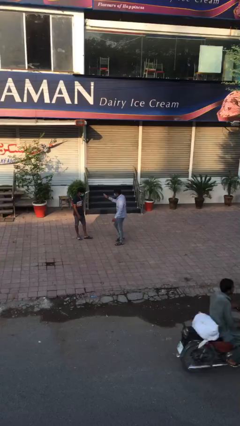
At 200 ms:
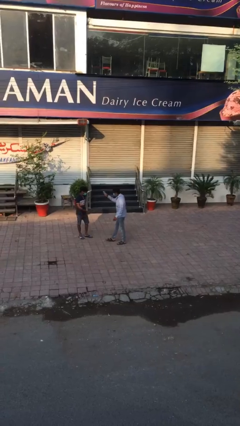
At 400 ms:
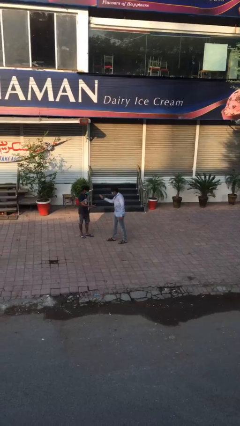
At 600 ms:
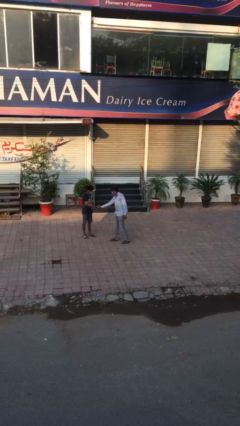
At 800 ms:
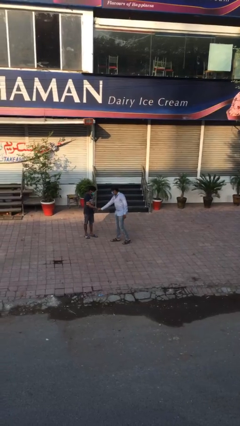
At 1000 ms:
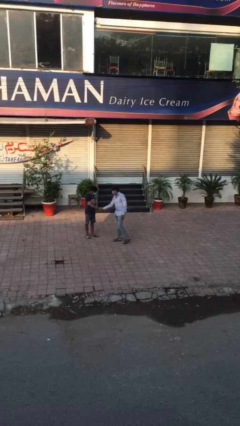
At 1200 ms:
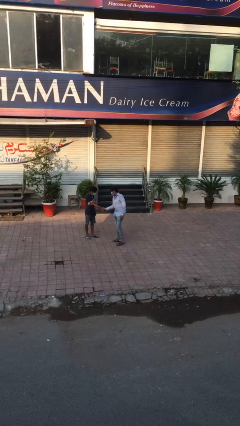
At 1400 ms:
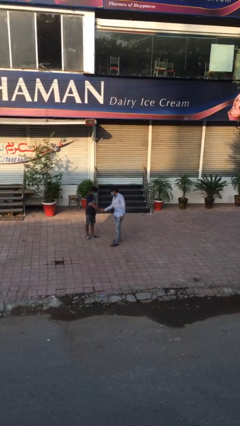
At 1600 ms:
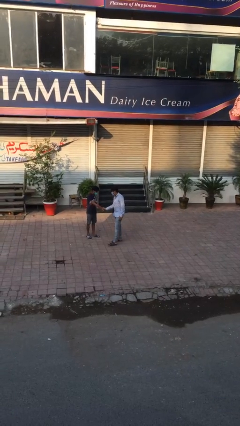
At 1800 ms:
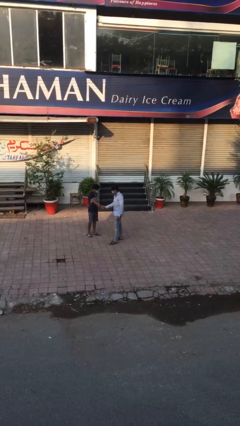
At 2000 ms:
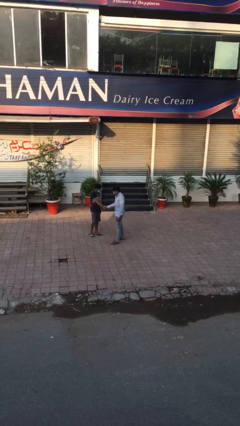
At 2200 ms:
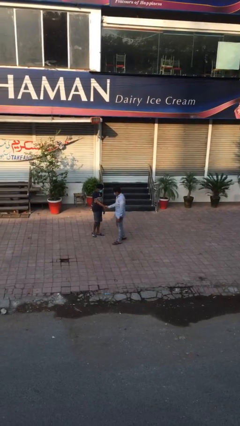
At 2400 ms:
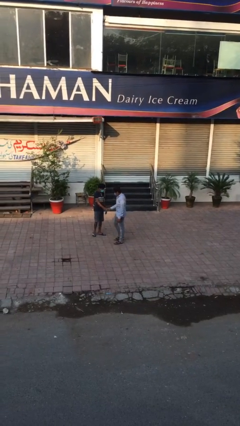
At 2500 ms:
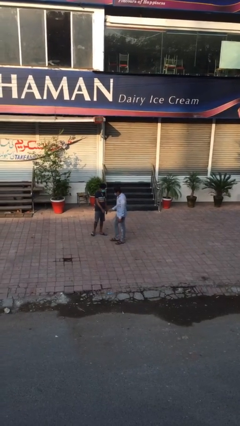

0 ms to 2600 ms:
person shakes hand

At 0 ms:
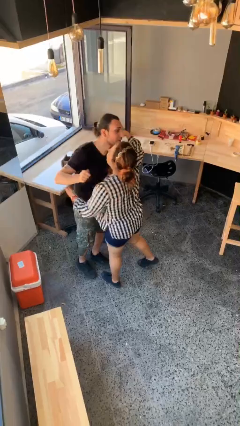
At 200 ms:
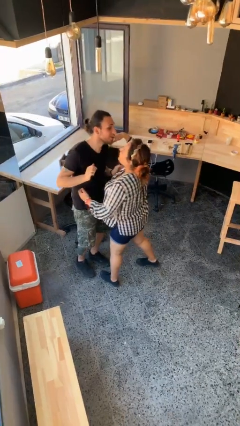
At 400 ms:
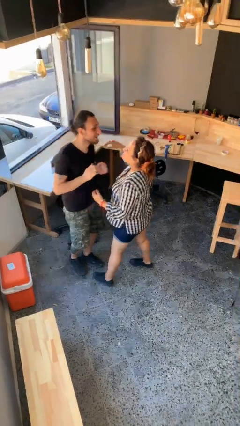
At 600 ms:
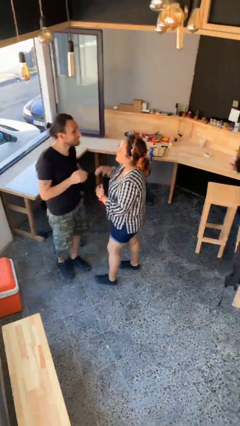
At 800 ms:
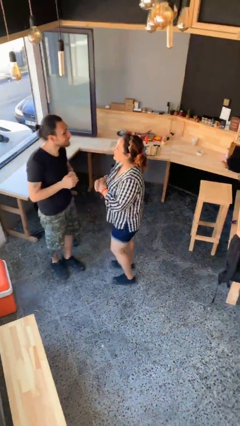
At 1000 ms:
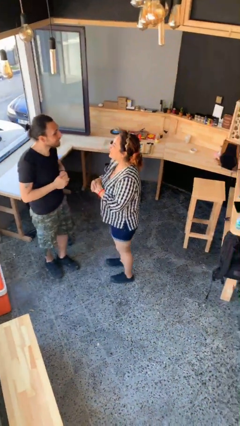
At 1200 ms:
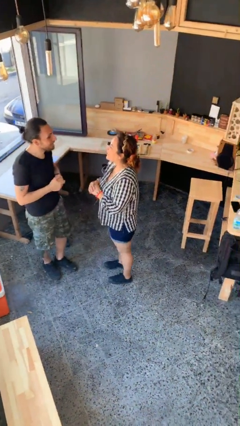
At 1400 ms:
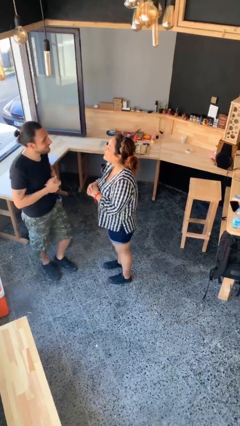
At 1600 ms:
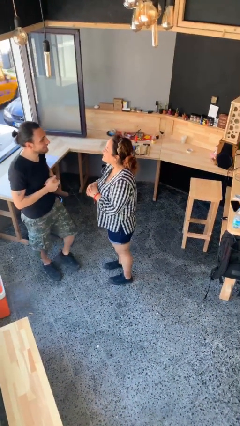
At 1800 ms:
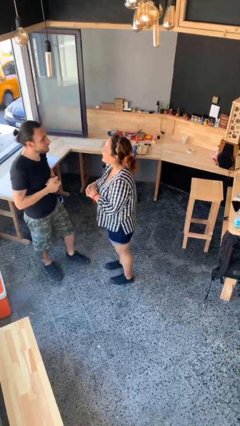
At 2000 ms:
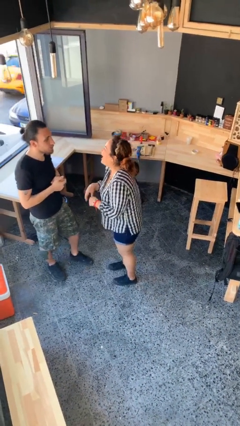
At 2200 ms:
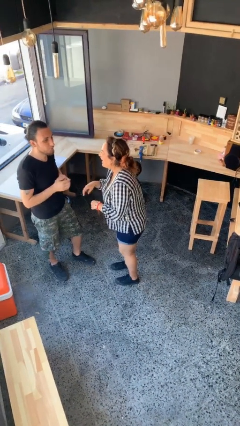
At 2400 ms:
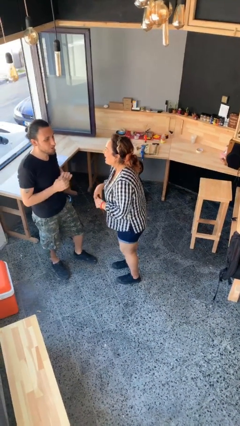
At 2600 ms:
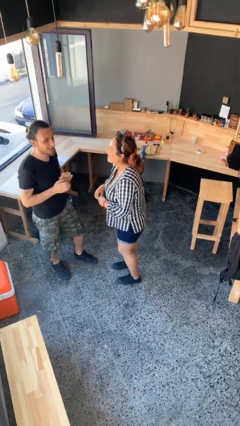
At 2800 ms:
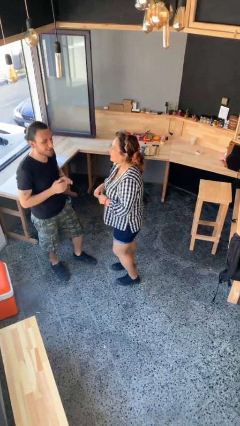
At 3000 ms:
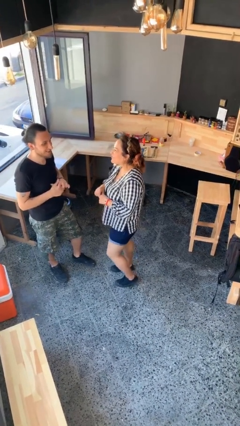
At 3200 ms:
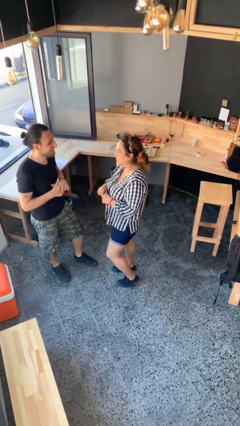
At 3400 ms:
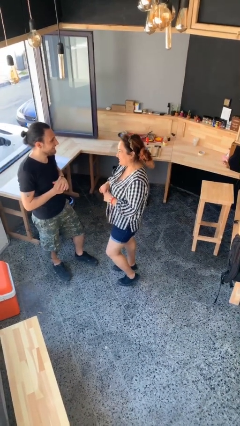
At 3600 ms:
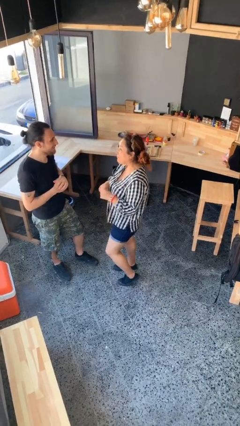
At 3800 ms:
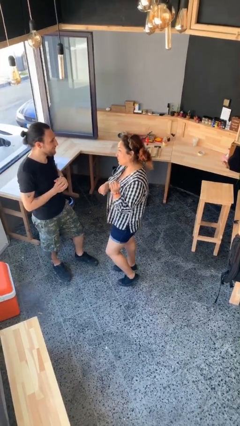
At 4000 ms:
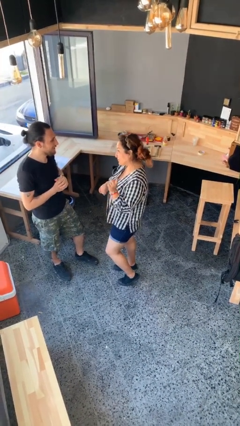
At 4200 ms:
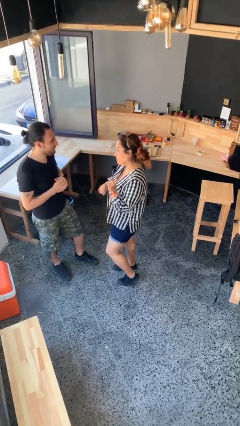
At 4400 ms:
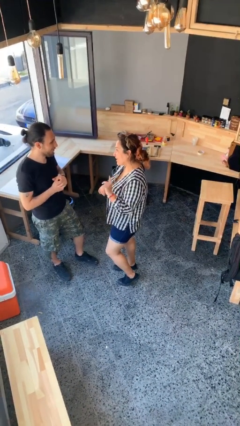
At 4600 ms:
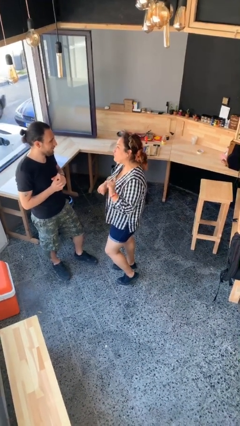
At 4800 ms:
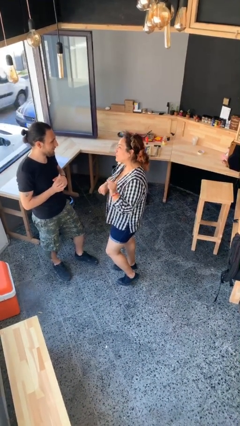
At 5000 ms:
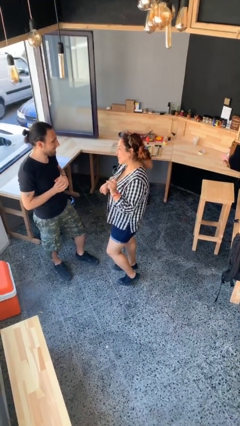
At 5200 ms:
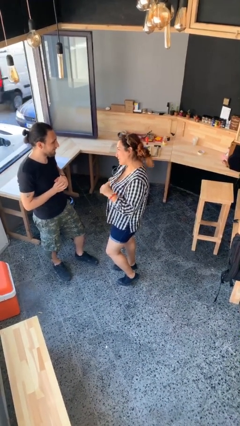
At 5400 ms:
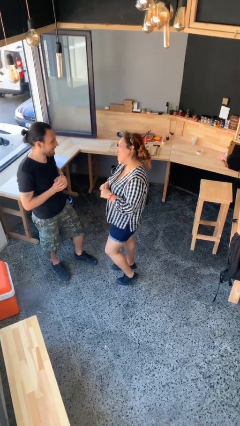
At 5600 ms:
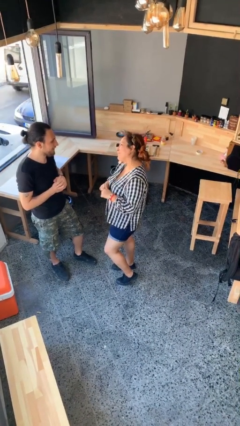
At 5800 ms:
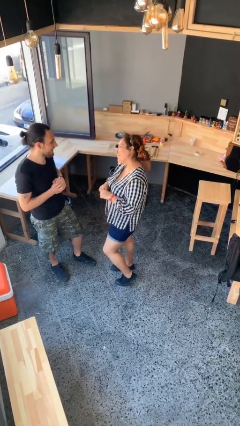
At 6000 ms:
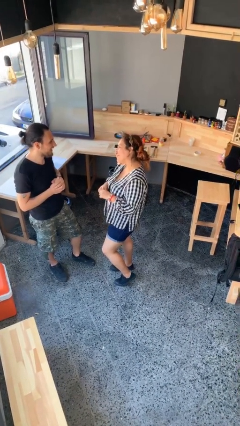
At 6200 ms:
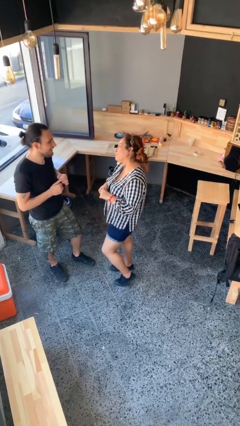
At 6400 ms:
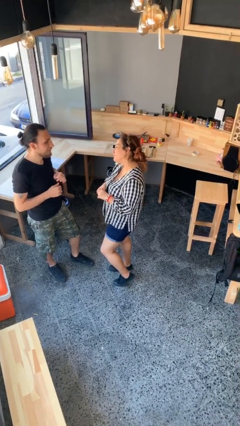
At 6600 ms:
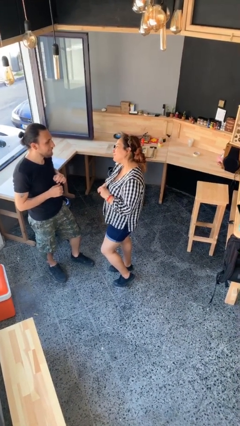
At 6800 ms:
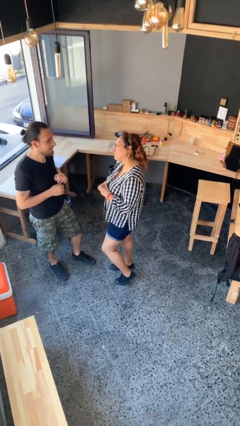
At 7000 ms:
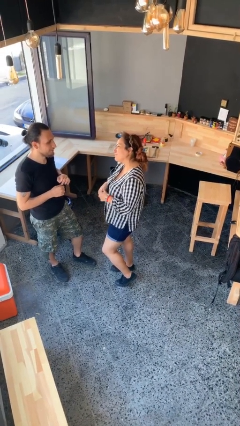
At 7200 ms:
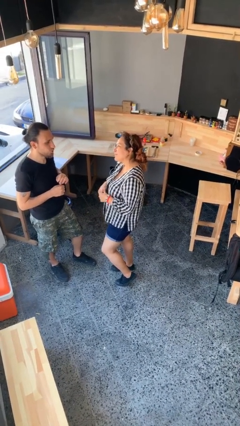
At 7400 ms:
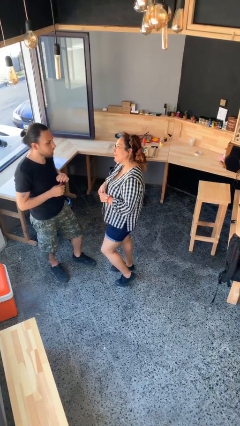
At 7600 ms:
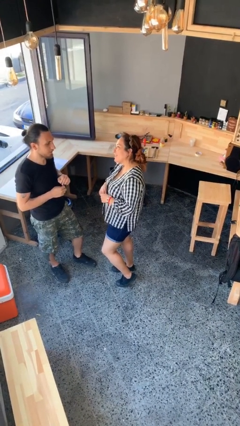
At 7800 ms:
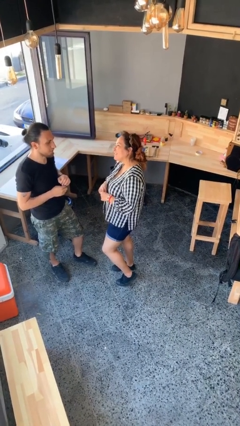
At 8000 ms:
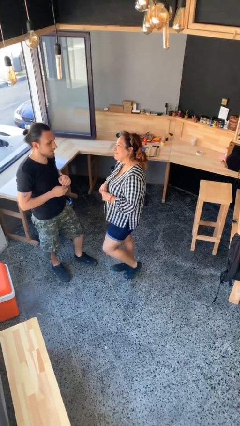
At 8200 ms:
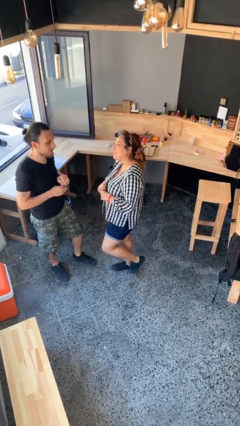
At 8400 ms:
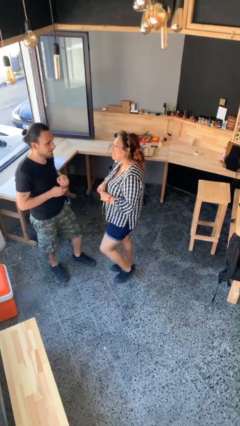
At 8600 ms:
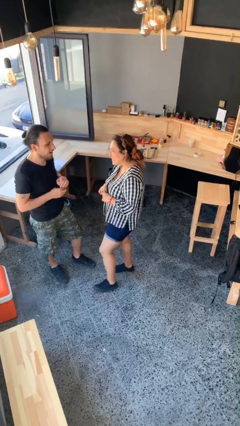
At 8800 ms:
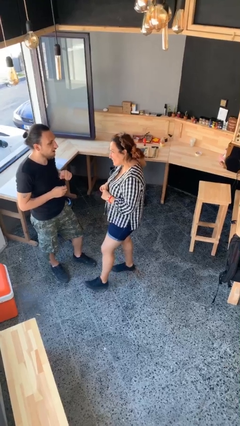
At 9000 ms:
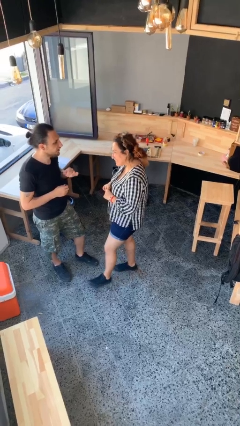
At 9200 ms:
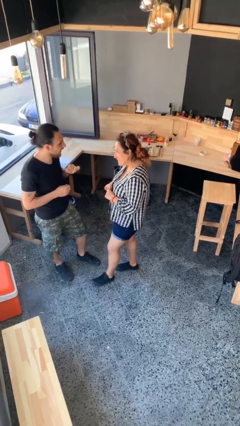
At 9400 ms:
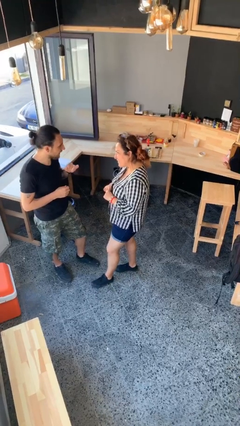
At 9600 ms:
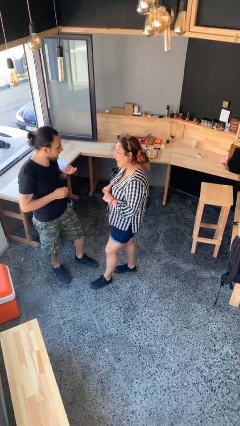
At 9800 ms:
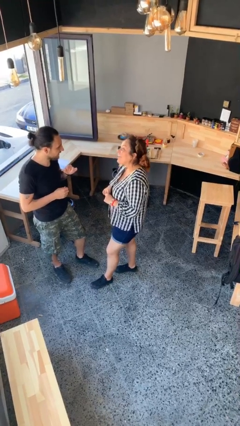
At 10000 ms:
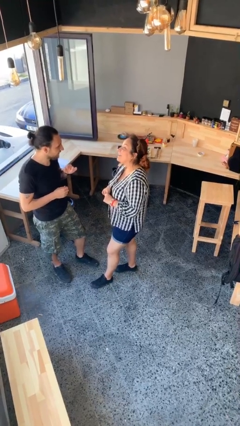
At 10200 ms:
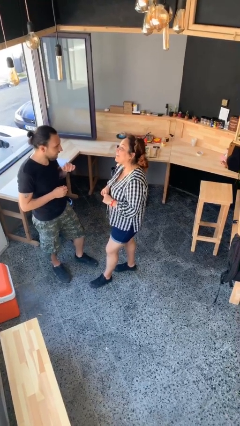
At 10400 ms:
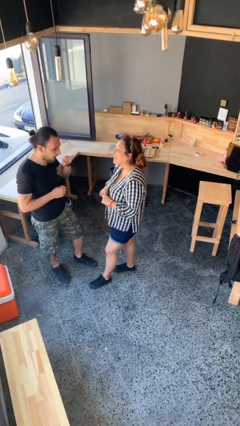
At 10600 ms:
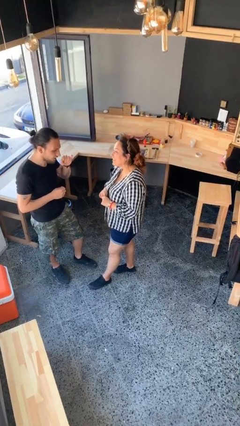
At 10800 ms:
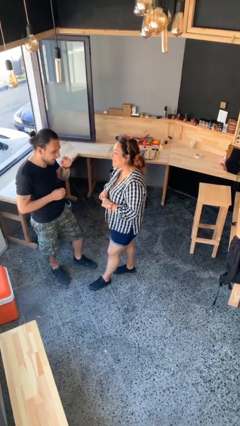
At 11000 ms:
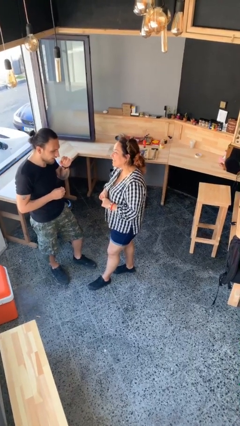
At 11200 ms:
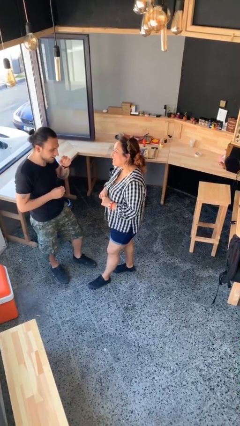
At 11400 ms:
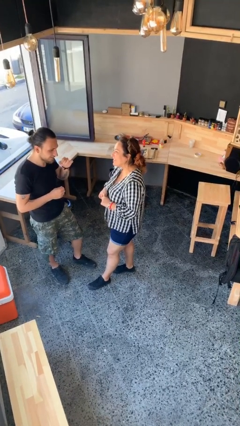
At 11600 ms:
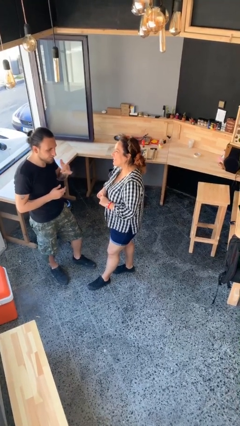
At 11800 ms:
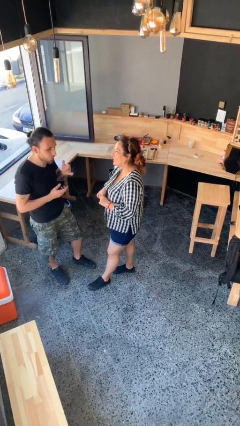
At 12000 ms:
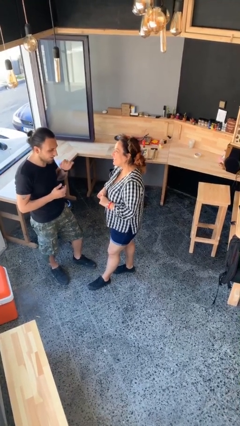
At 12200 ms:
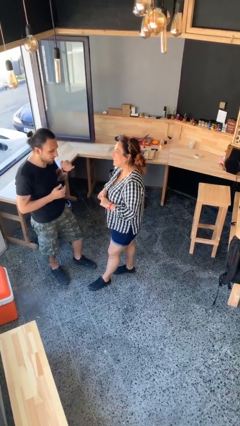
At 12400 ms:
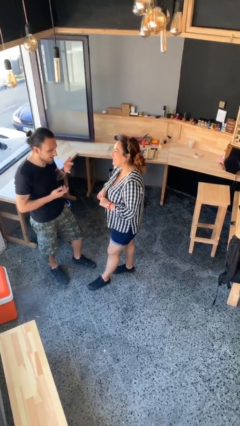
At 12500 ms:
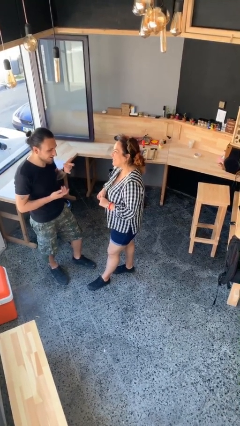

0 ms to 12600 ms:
person talks to person

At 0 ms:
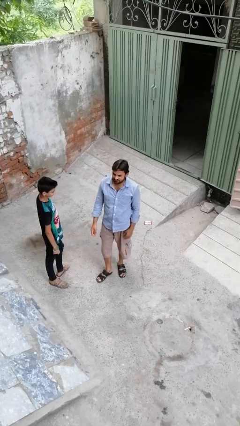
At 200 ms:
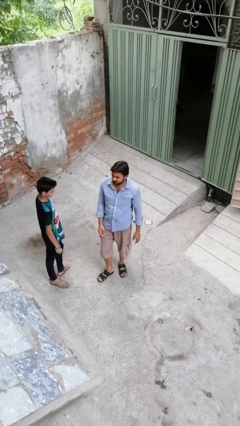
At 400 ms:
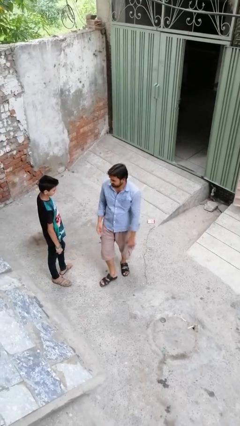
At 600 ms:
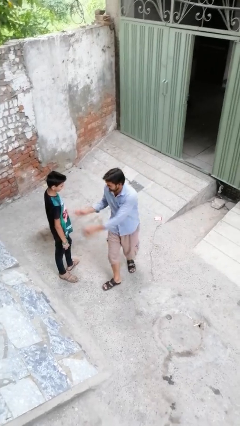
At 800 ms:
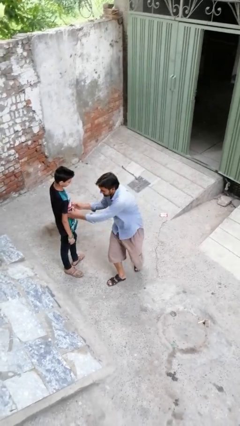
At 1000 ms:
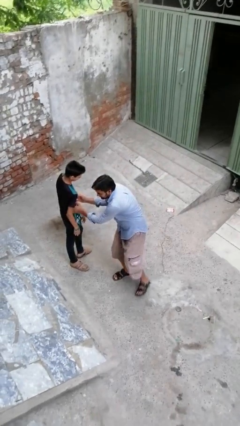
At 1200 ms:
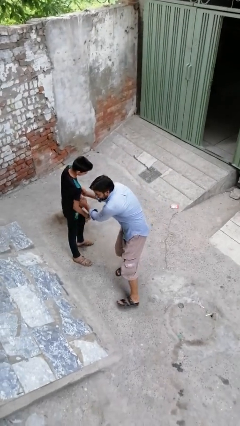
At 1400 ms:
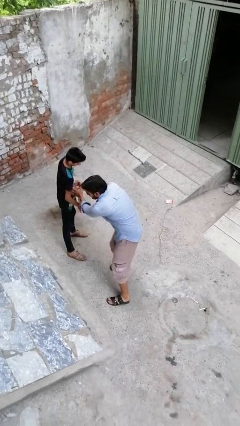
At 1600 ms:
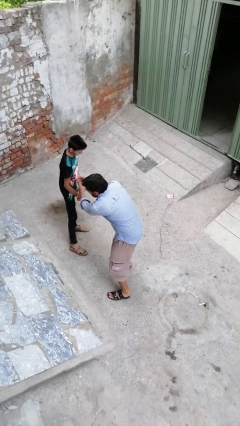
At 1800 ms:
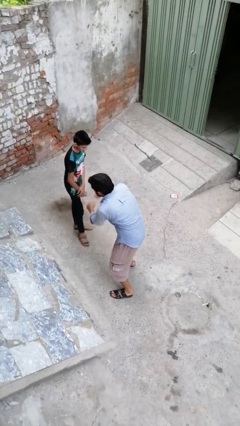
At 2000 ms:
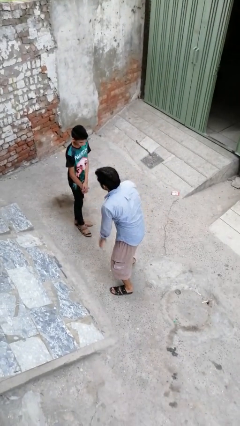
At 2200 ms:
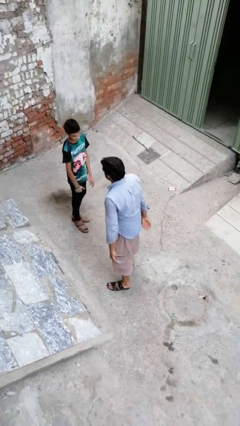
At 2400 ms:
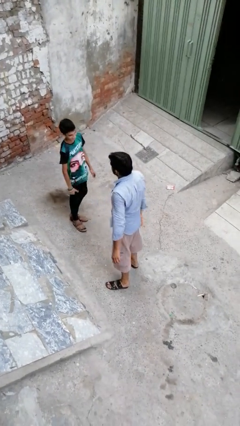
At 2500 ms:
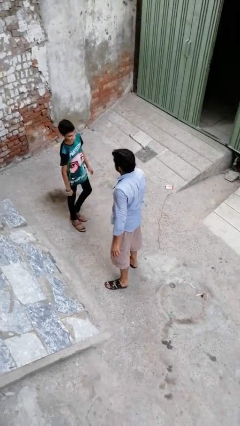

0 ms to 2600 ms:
person tickles person

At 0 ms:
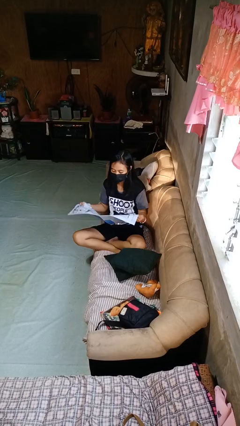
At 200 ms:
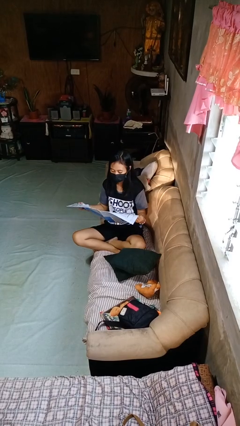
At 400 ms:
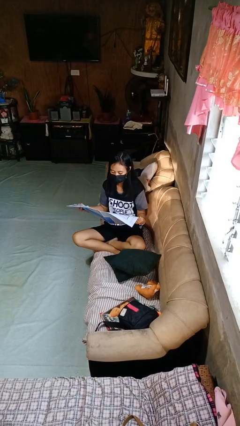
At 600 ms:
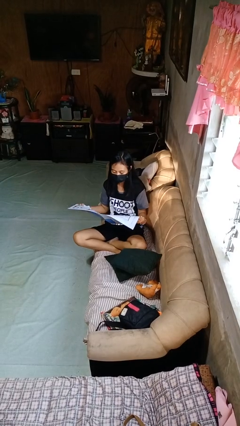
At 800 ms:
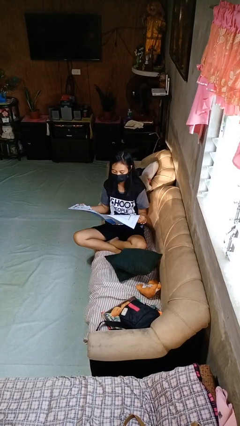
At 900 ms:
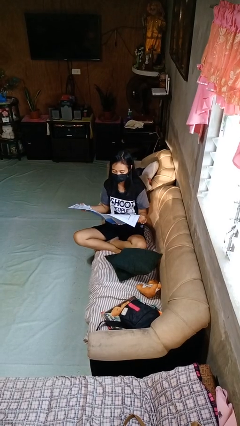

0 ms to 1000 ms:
person reads newspaper
